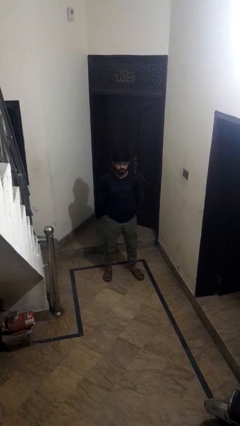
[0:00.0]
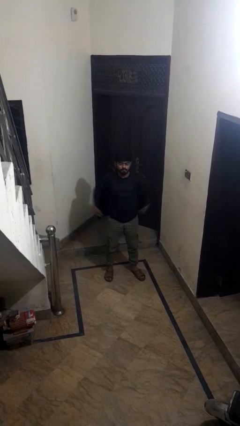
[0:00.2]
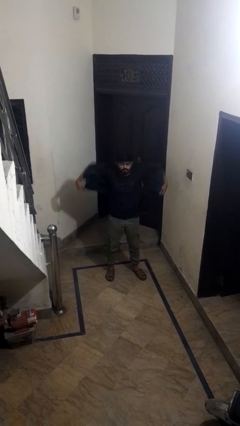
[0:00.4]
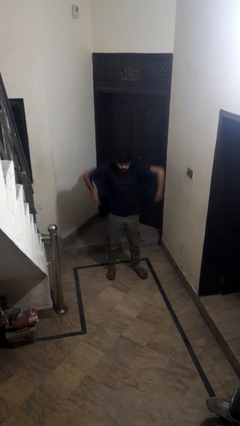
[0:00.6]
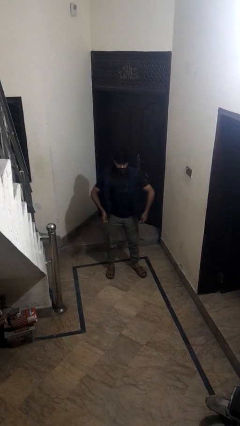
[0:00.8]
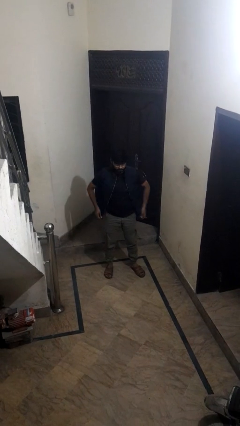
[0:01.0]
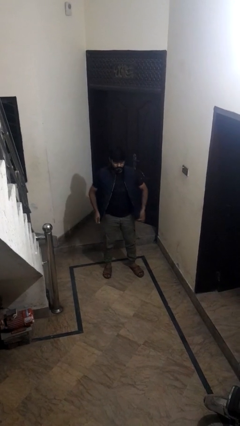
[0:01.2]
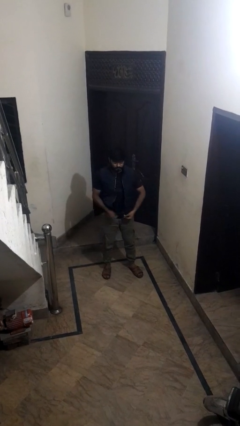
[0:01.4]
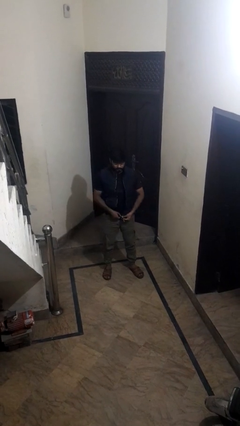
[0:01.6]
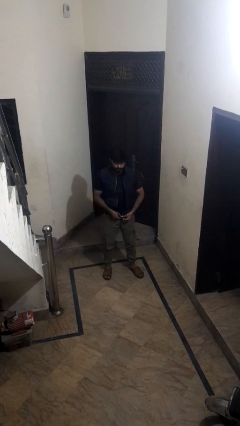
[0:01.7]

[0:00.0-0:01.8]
person puts on jacket

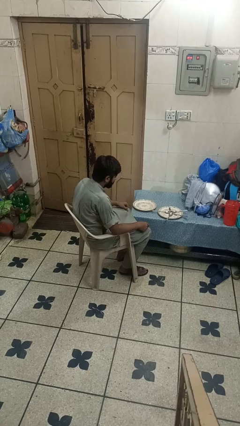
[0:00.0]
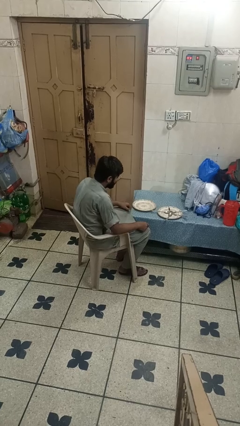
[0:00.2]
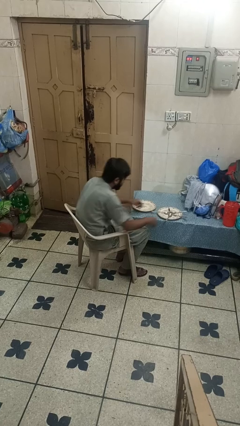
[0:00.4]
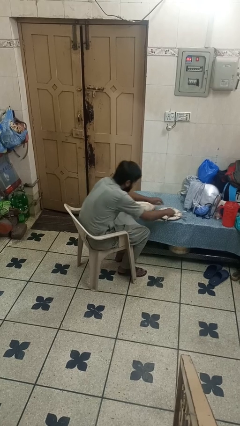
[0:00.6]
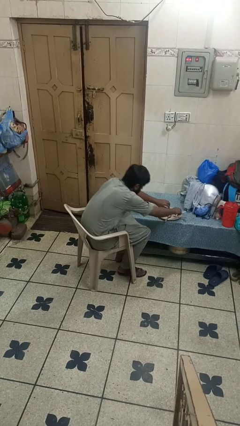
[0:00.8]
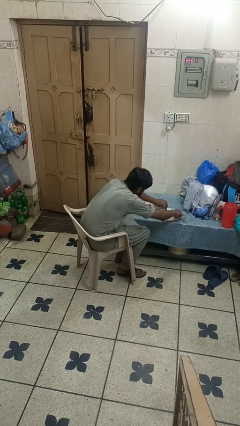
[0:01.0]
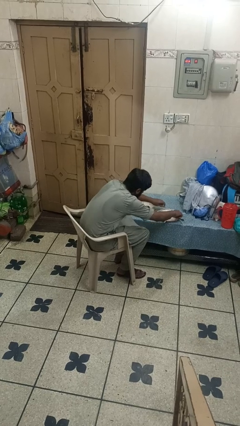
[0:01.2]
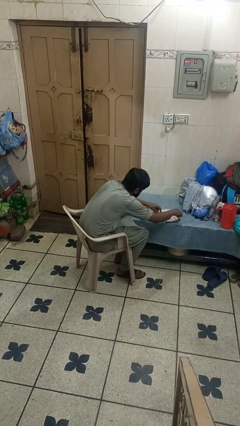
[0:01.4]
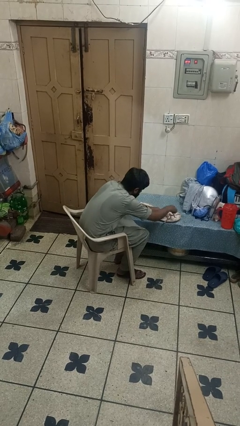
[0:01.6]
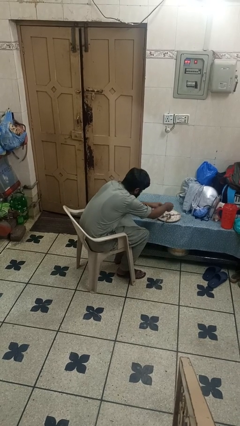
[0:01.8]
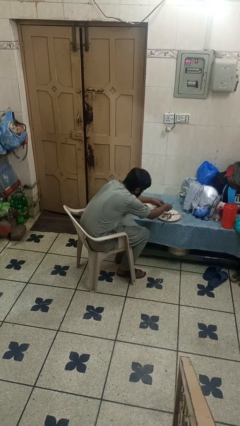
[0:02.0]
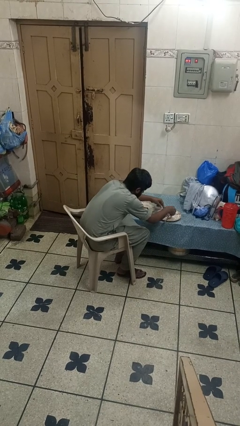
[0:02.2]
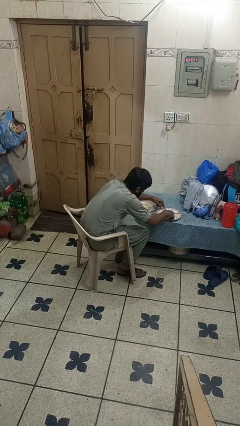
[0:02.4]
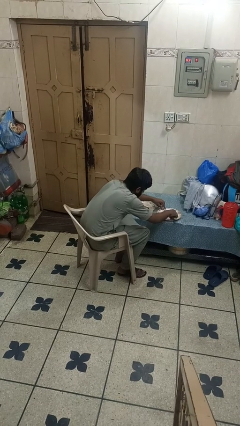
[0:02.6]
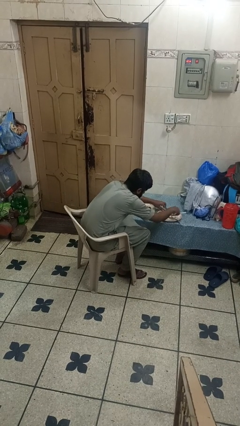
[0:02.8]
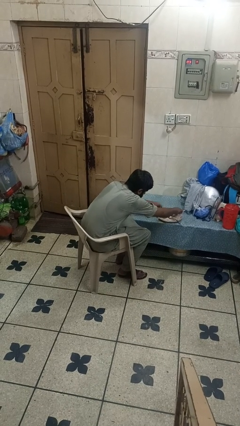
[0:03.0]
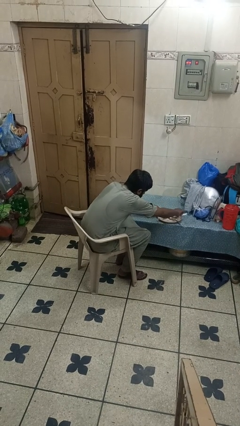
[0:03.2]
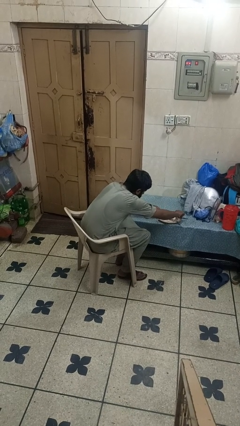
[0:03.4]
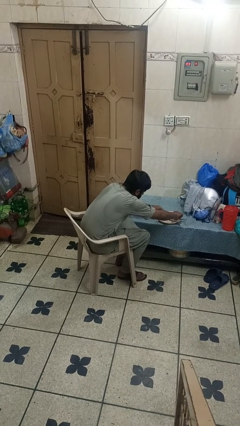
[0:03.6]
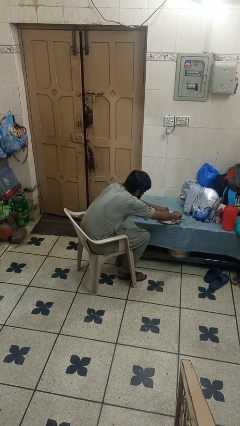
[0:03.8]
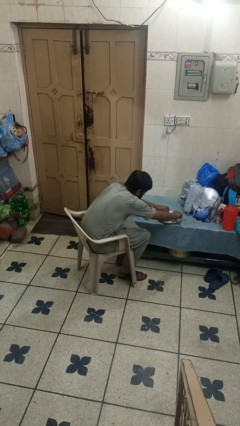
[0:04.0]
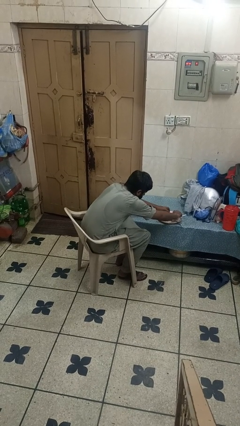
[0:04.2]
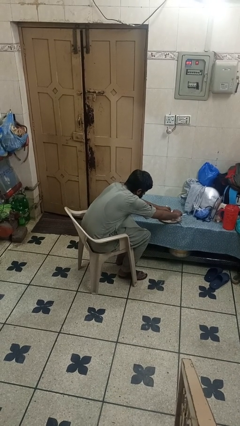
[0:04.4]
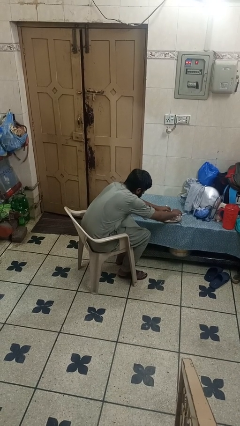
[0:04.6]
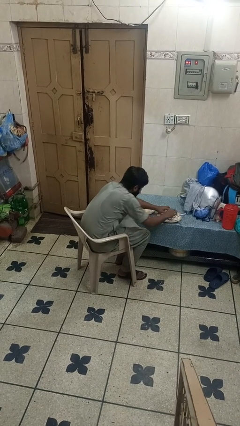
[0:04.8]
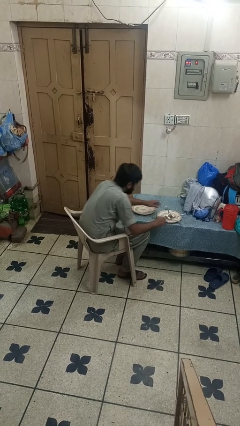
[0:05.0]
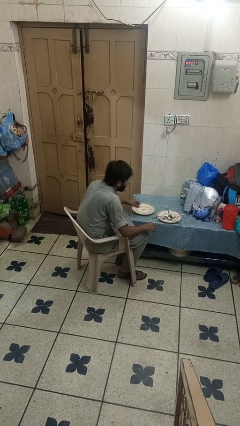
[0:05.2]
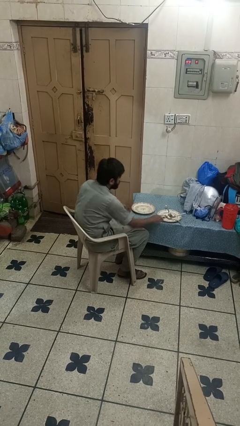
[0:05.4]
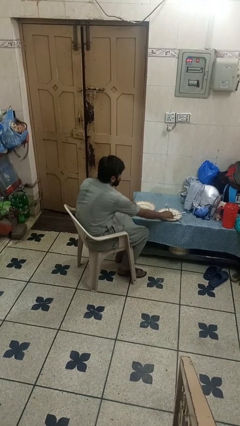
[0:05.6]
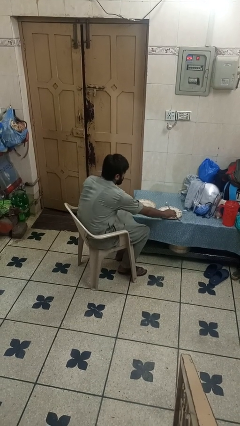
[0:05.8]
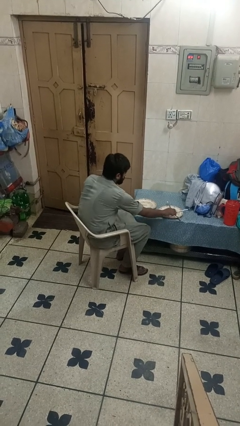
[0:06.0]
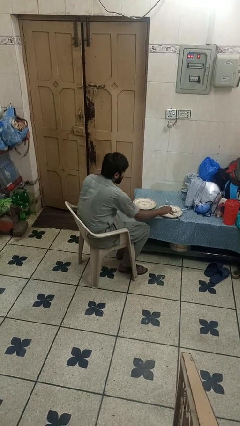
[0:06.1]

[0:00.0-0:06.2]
person sets table

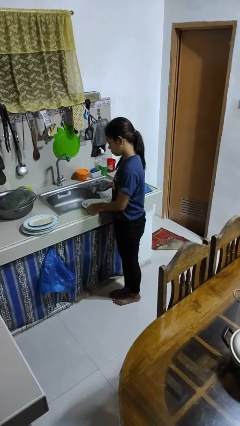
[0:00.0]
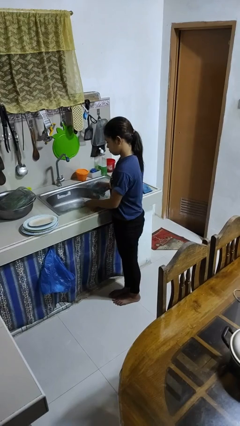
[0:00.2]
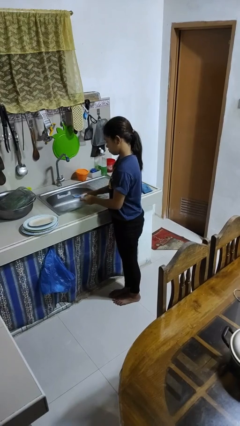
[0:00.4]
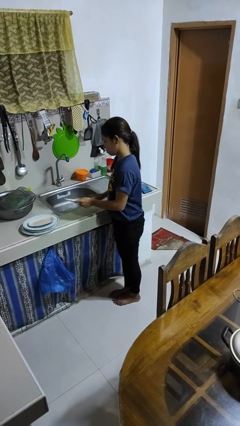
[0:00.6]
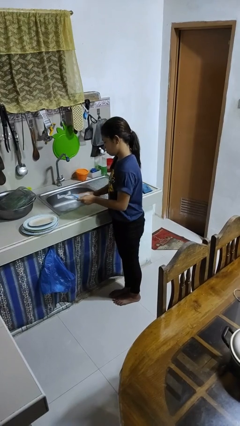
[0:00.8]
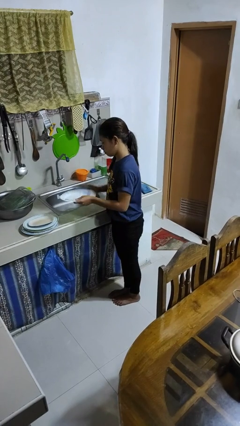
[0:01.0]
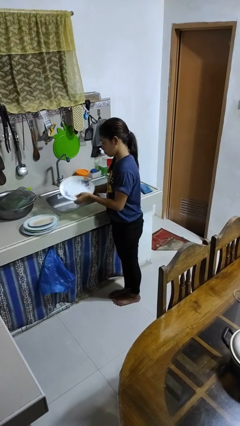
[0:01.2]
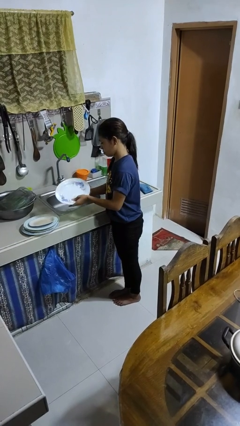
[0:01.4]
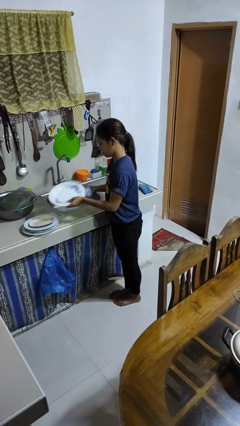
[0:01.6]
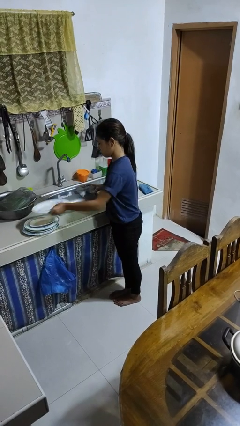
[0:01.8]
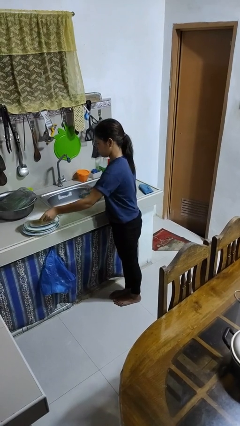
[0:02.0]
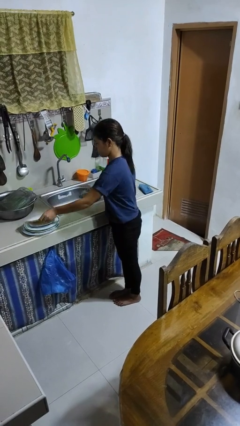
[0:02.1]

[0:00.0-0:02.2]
person dries dish

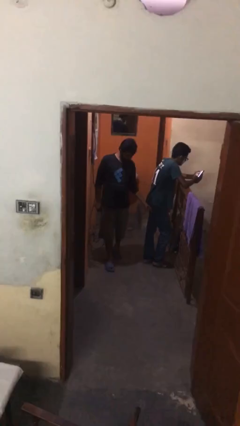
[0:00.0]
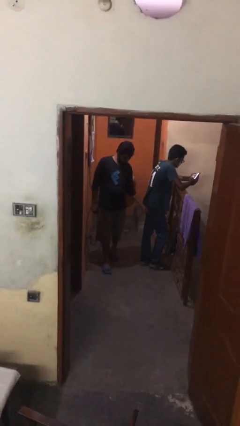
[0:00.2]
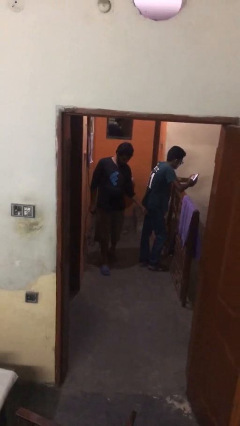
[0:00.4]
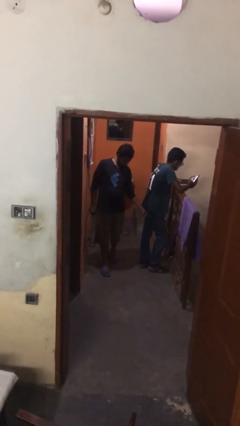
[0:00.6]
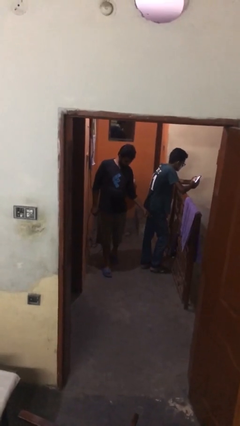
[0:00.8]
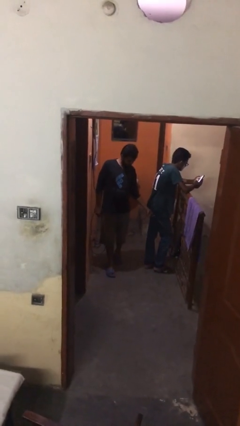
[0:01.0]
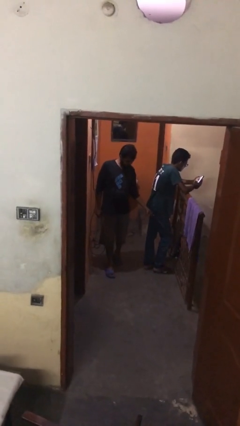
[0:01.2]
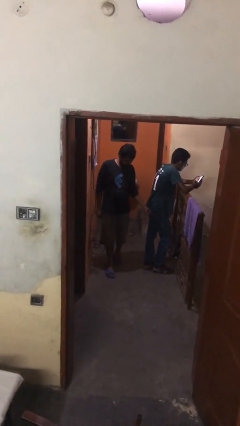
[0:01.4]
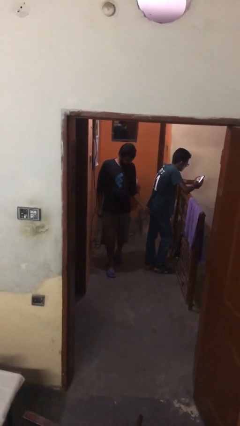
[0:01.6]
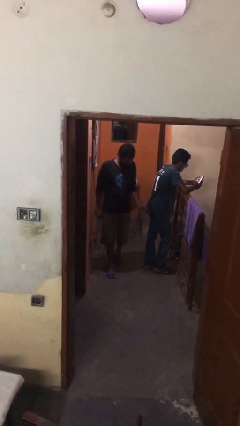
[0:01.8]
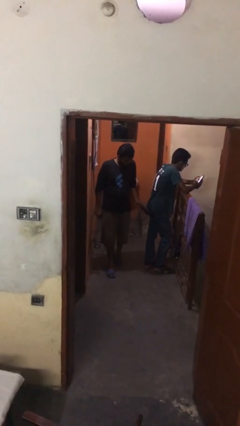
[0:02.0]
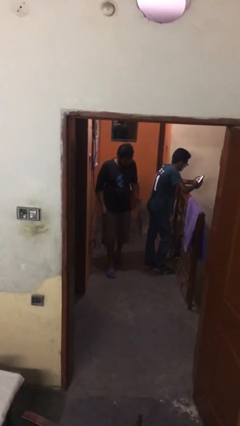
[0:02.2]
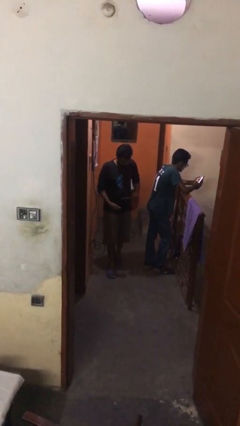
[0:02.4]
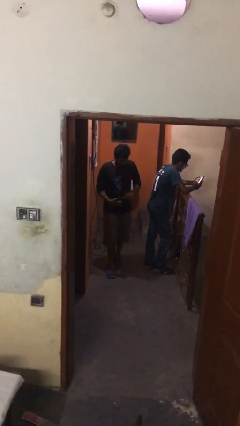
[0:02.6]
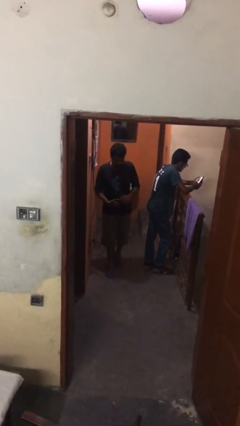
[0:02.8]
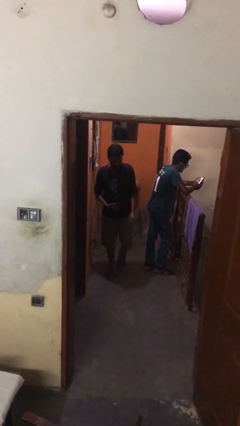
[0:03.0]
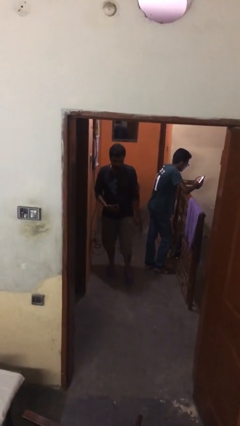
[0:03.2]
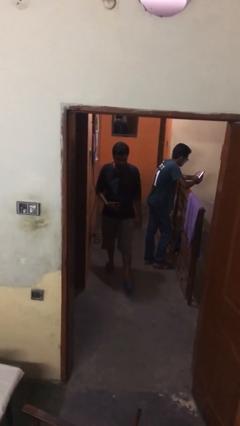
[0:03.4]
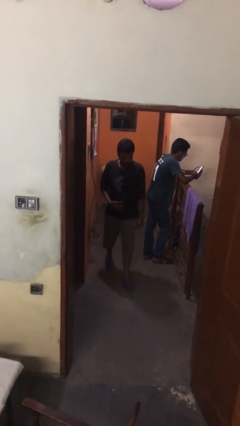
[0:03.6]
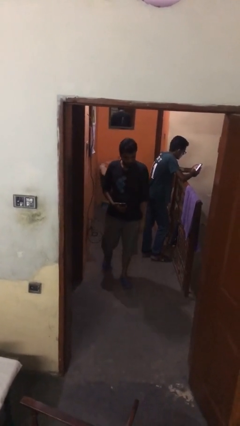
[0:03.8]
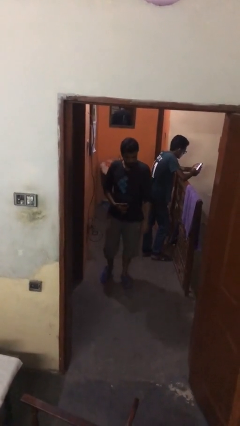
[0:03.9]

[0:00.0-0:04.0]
person steals object from person

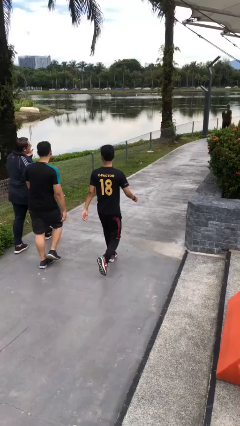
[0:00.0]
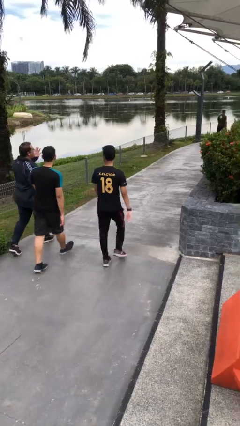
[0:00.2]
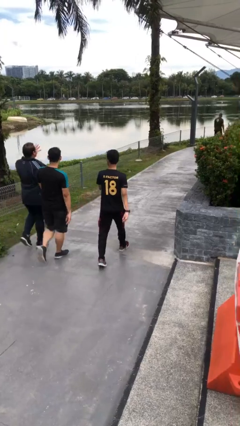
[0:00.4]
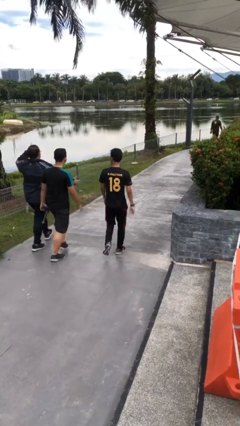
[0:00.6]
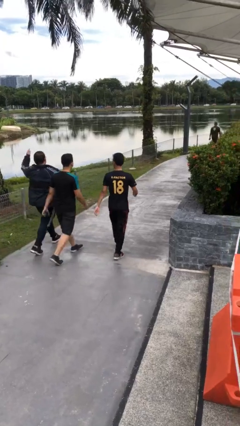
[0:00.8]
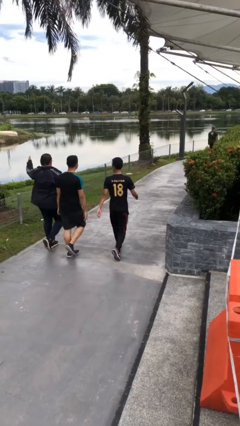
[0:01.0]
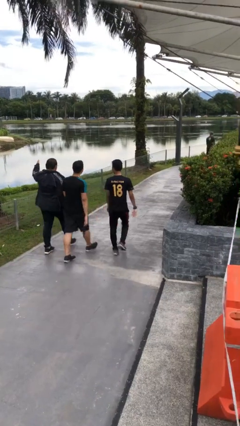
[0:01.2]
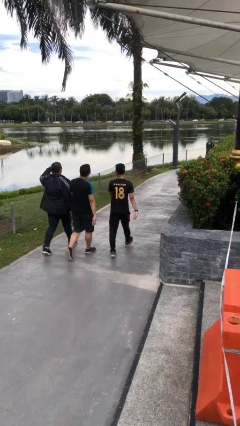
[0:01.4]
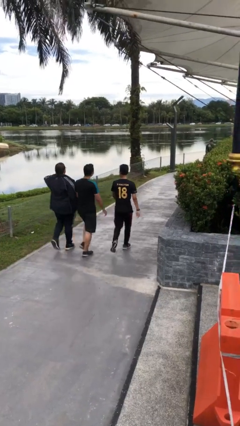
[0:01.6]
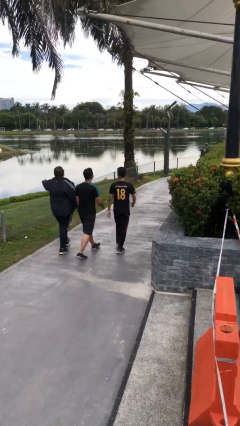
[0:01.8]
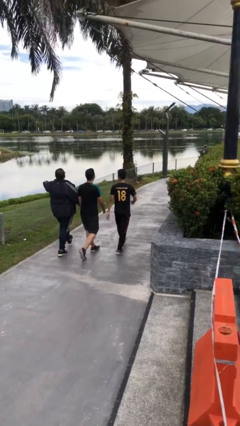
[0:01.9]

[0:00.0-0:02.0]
person talks to person

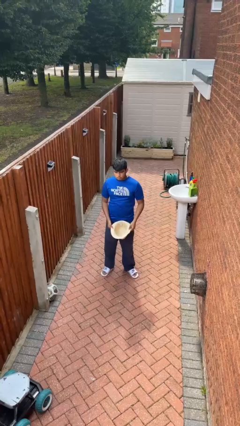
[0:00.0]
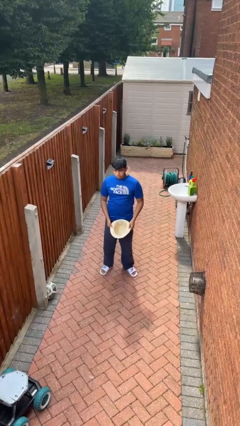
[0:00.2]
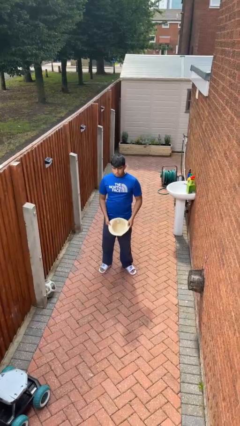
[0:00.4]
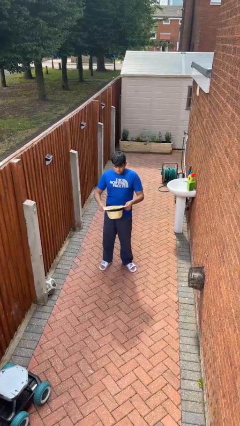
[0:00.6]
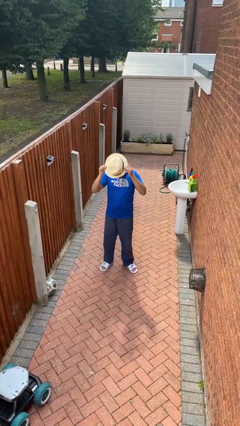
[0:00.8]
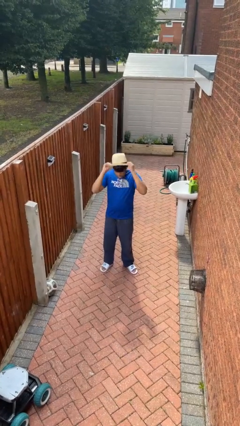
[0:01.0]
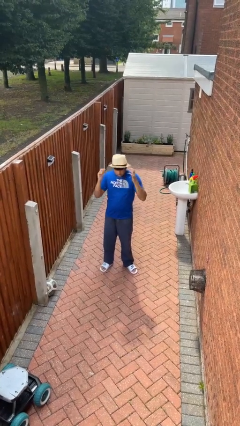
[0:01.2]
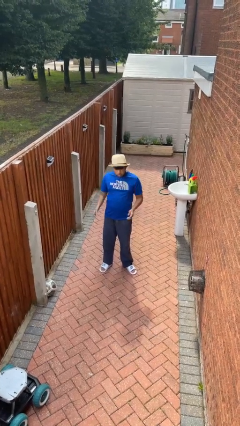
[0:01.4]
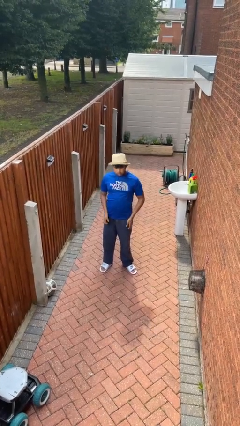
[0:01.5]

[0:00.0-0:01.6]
person puts on hat
